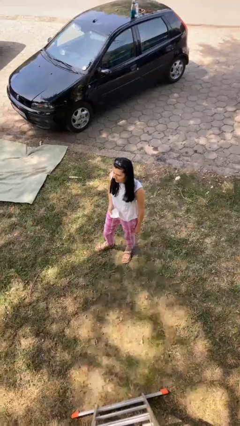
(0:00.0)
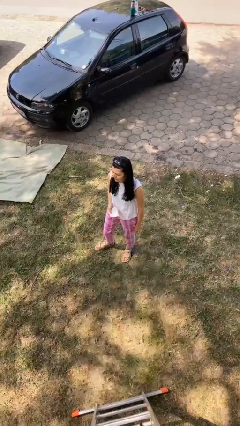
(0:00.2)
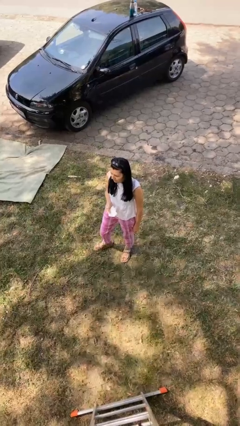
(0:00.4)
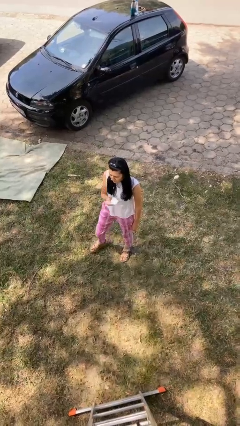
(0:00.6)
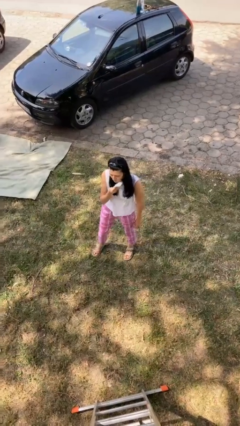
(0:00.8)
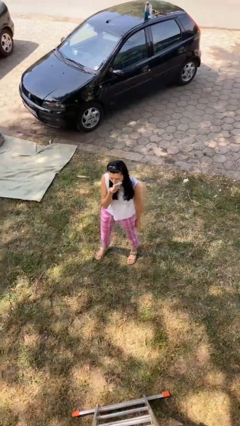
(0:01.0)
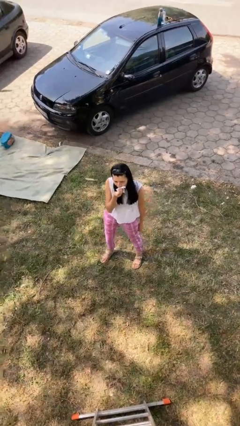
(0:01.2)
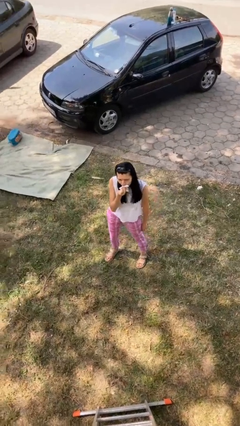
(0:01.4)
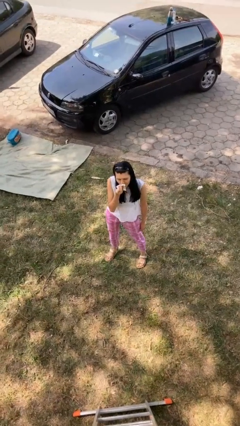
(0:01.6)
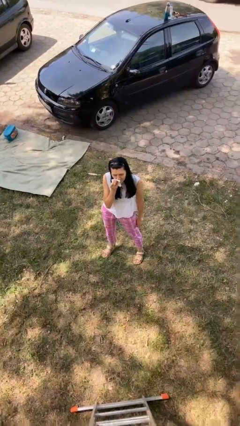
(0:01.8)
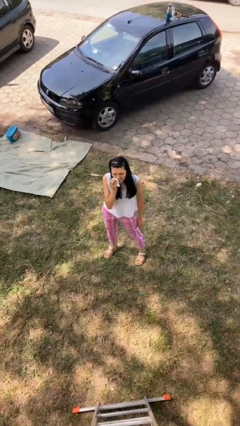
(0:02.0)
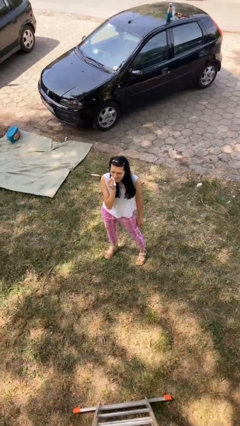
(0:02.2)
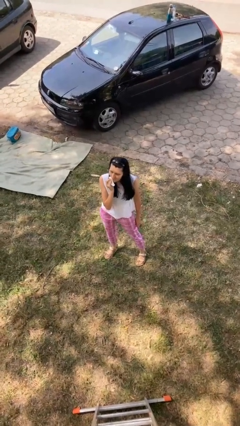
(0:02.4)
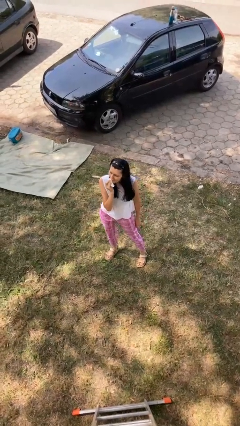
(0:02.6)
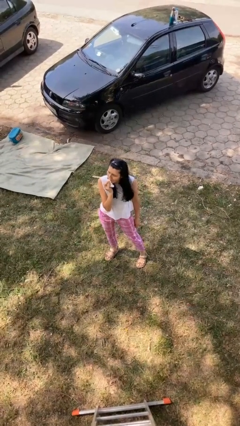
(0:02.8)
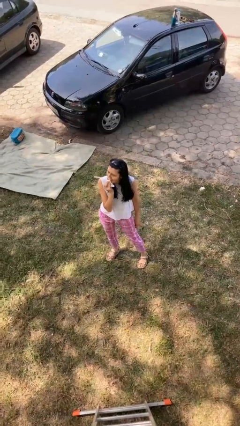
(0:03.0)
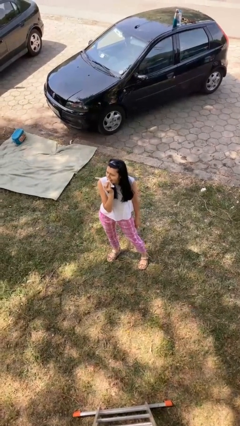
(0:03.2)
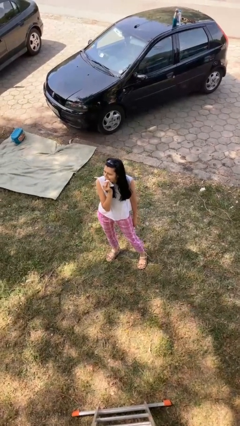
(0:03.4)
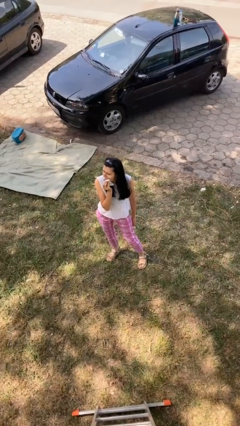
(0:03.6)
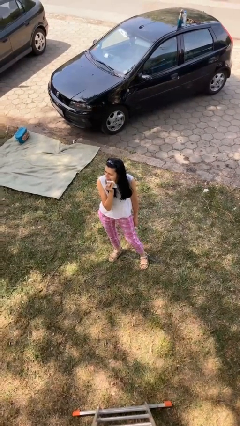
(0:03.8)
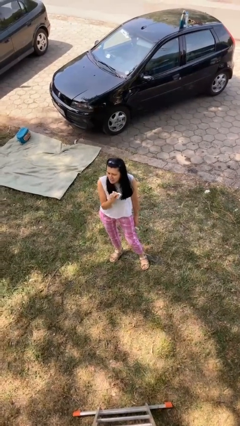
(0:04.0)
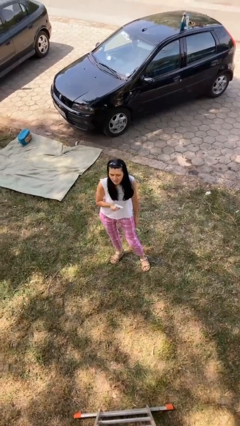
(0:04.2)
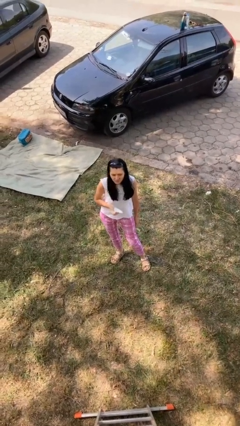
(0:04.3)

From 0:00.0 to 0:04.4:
person wipes mouth with napkin

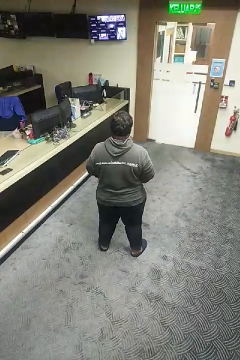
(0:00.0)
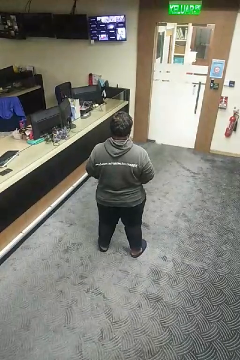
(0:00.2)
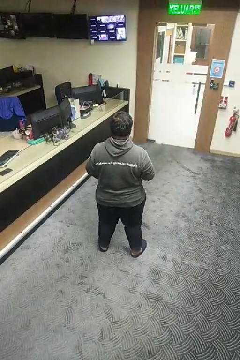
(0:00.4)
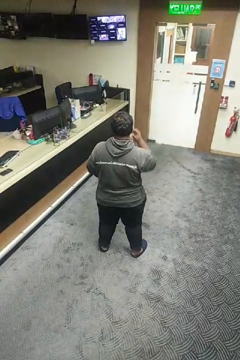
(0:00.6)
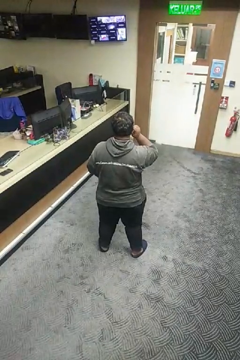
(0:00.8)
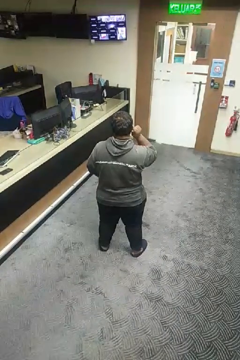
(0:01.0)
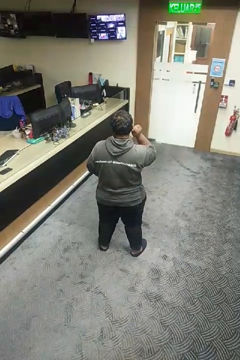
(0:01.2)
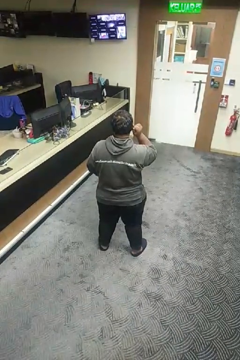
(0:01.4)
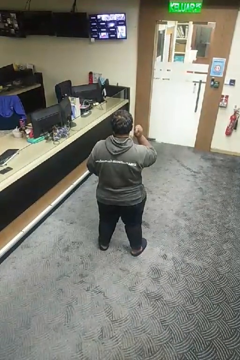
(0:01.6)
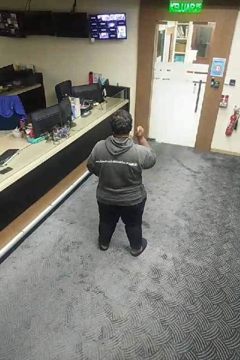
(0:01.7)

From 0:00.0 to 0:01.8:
person touches earlobe

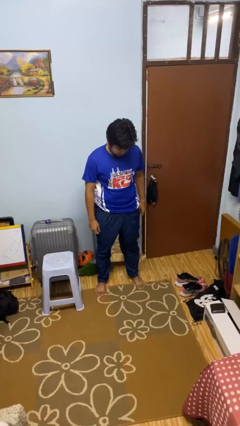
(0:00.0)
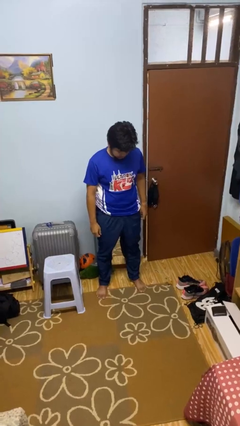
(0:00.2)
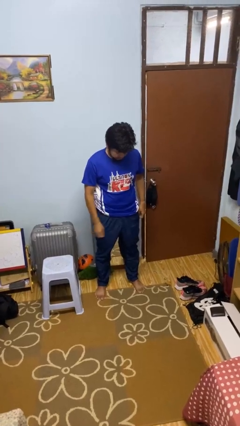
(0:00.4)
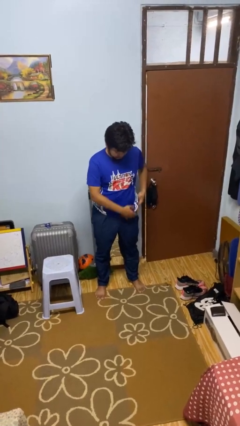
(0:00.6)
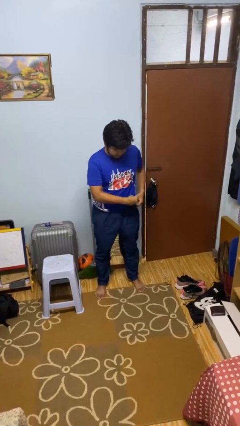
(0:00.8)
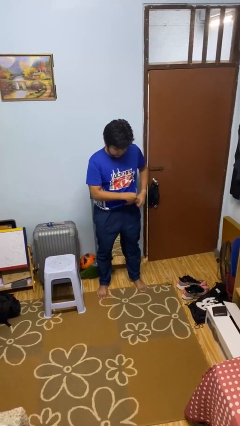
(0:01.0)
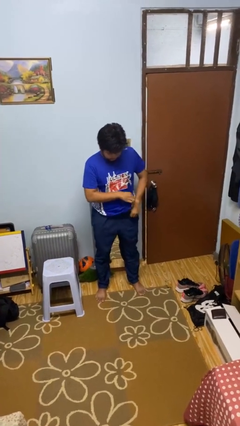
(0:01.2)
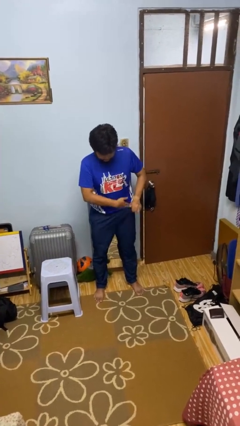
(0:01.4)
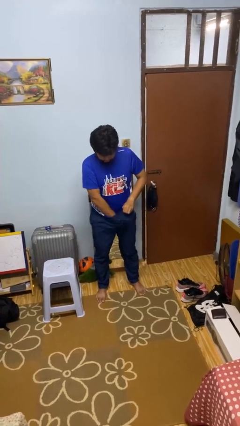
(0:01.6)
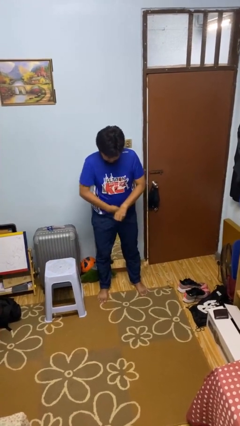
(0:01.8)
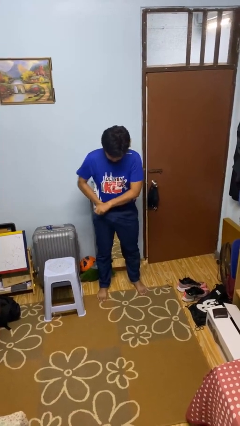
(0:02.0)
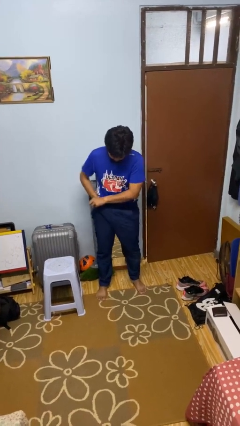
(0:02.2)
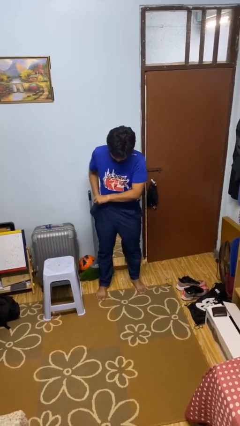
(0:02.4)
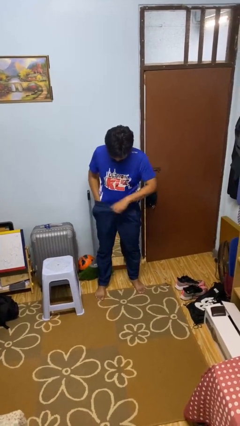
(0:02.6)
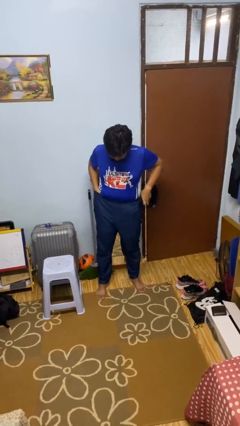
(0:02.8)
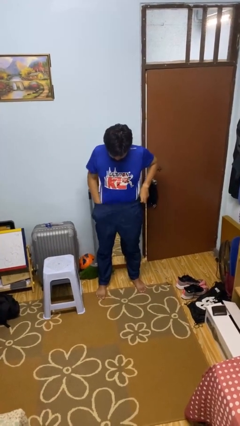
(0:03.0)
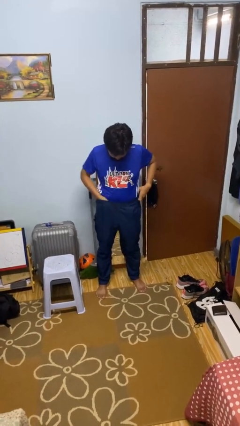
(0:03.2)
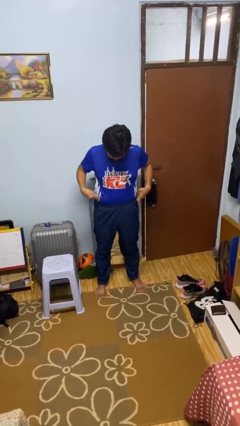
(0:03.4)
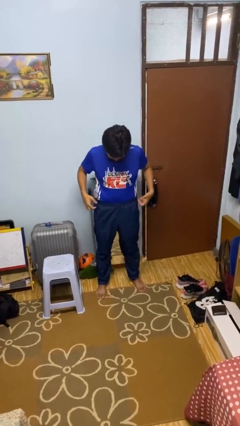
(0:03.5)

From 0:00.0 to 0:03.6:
person tucks in shirt

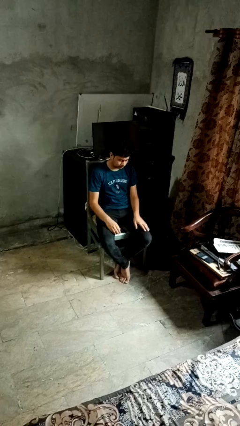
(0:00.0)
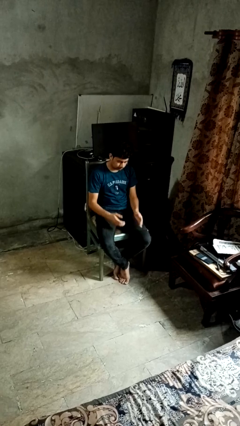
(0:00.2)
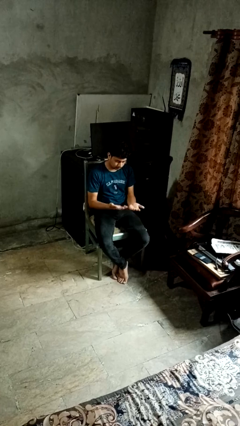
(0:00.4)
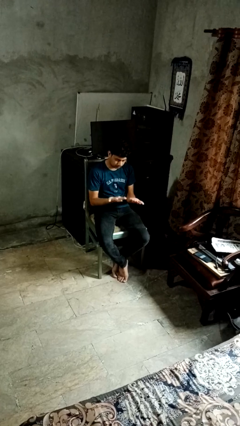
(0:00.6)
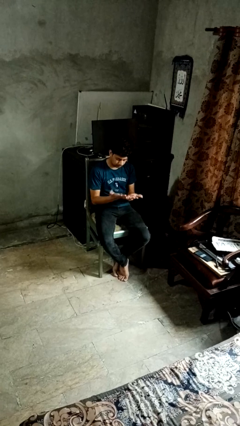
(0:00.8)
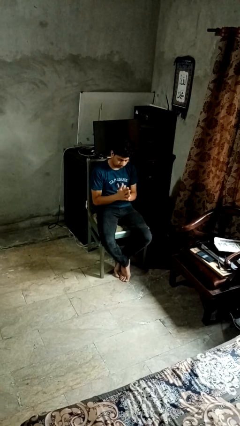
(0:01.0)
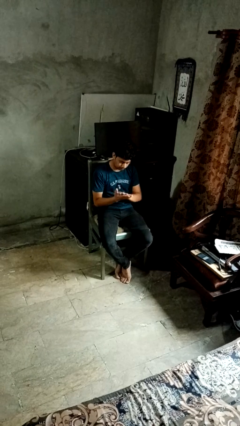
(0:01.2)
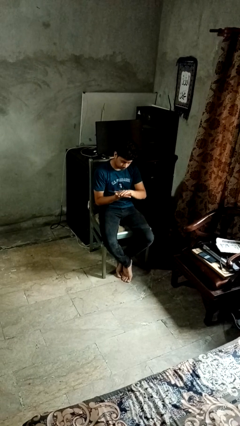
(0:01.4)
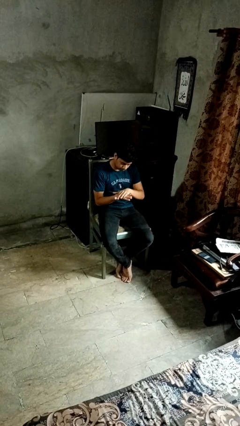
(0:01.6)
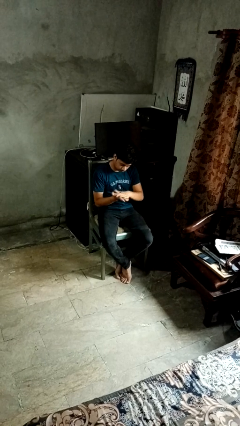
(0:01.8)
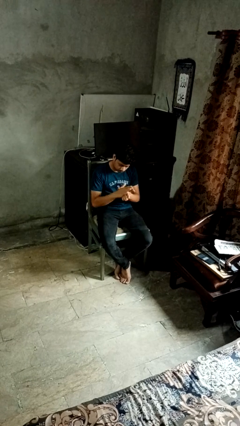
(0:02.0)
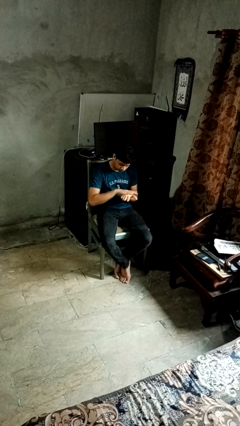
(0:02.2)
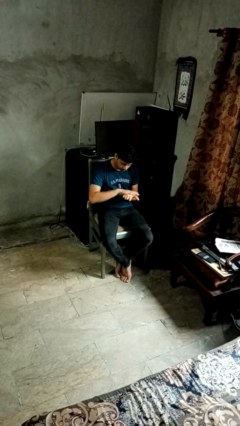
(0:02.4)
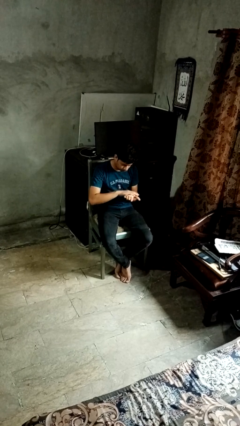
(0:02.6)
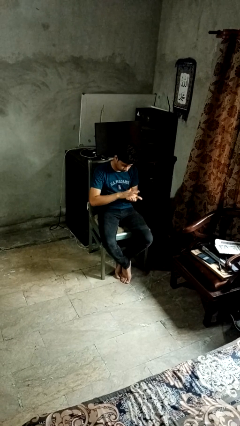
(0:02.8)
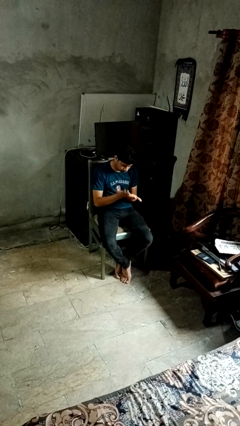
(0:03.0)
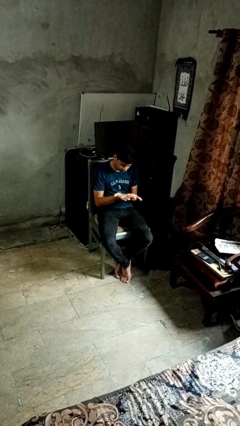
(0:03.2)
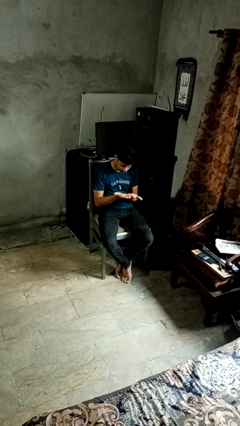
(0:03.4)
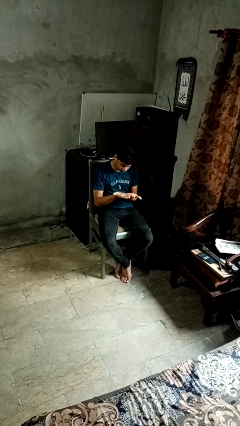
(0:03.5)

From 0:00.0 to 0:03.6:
person looks at hands in lap

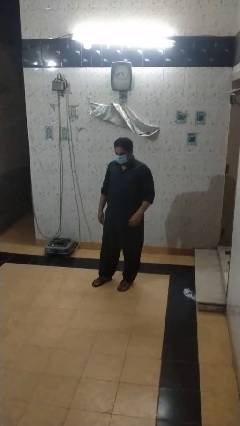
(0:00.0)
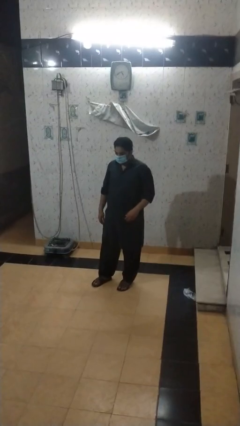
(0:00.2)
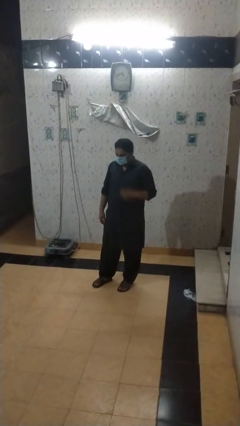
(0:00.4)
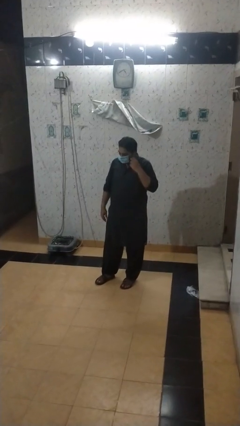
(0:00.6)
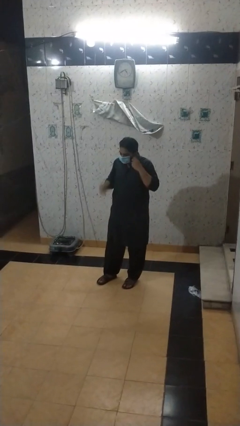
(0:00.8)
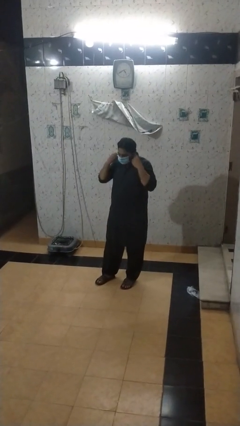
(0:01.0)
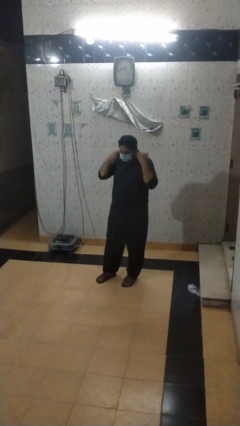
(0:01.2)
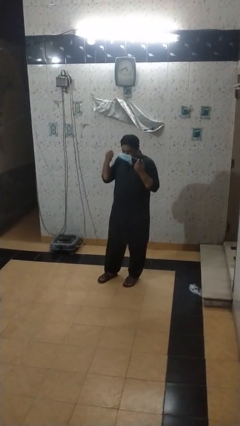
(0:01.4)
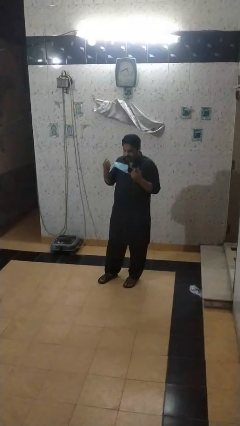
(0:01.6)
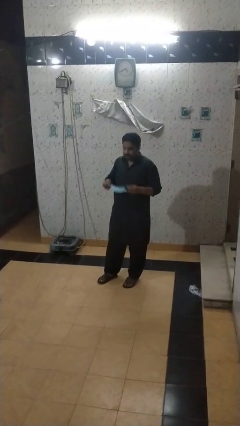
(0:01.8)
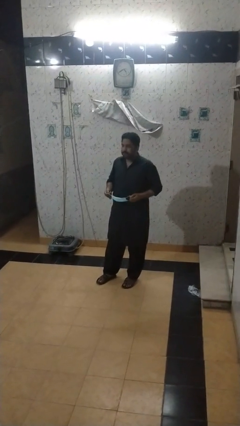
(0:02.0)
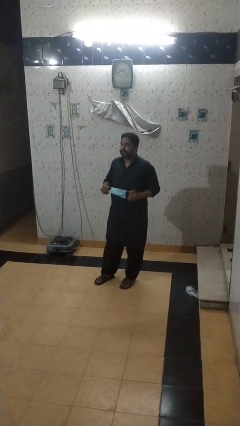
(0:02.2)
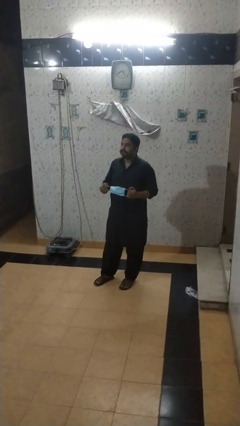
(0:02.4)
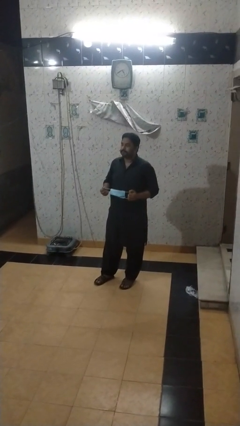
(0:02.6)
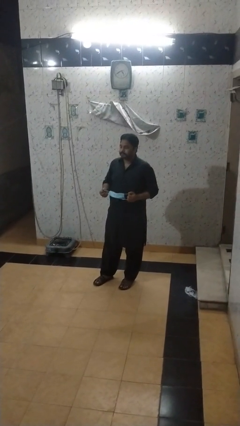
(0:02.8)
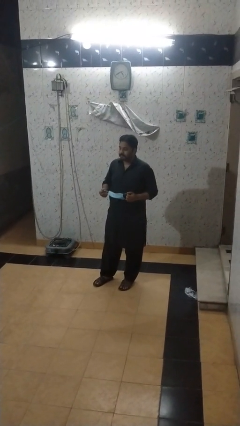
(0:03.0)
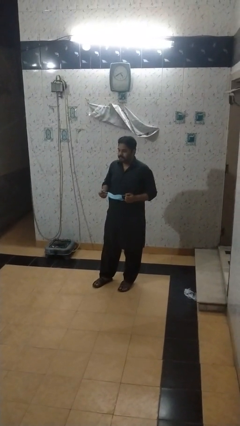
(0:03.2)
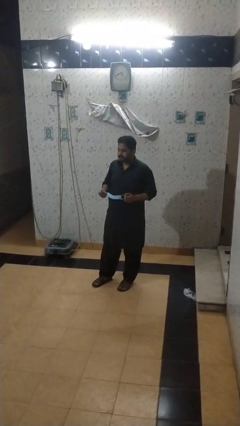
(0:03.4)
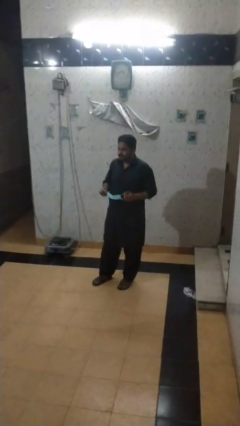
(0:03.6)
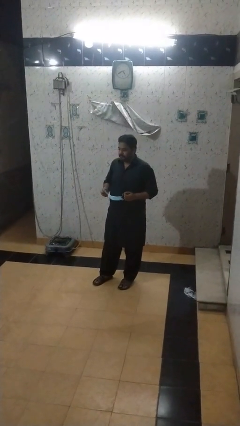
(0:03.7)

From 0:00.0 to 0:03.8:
person takes off facemask

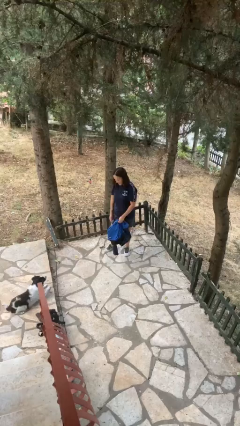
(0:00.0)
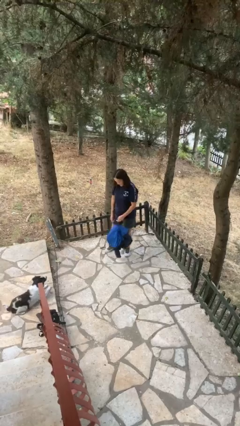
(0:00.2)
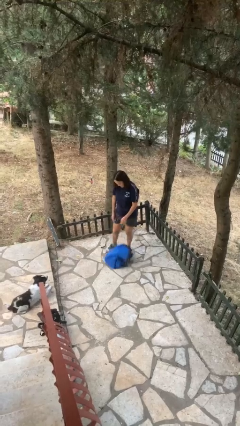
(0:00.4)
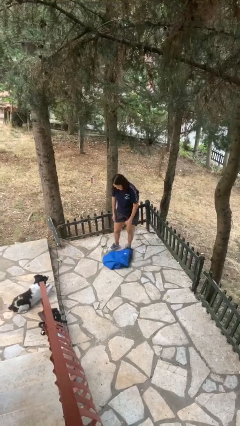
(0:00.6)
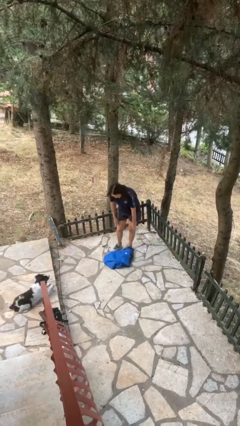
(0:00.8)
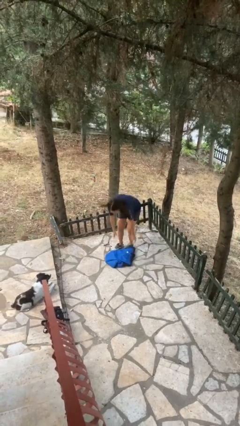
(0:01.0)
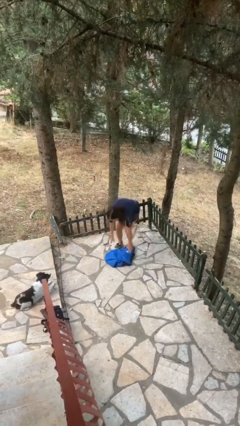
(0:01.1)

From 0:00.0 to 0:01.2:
person drops object
